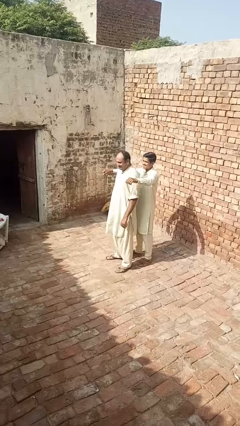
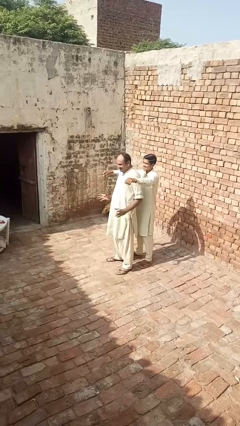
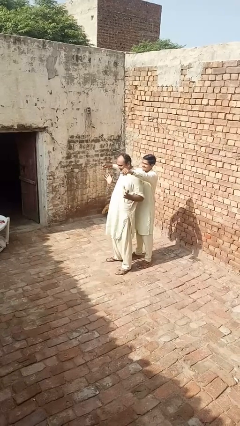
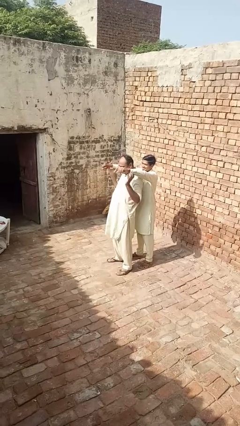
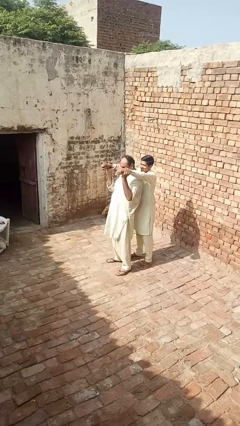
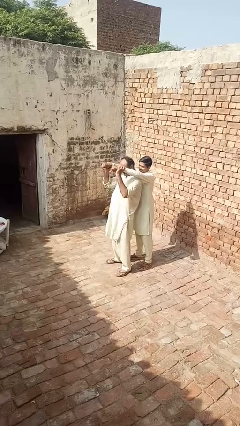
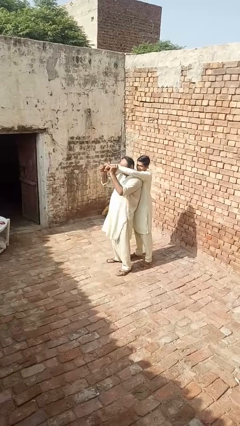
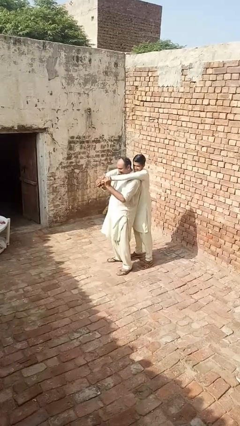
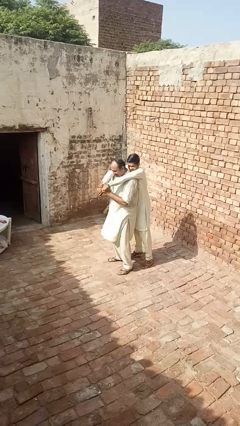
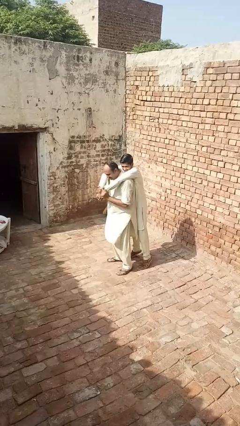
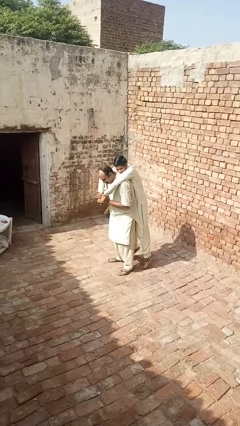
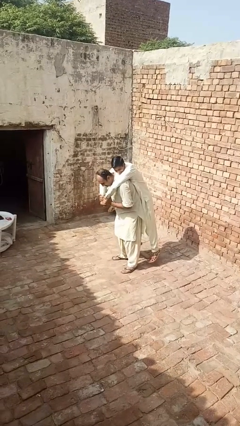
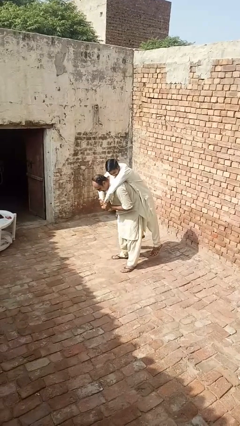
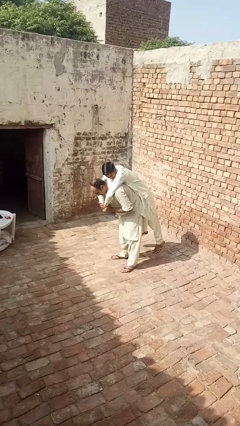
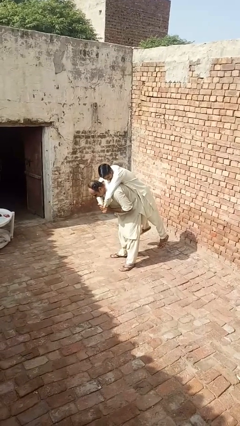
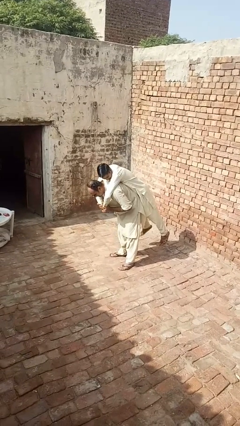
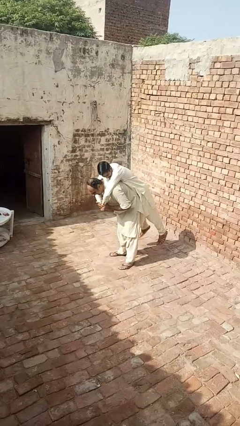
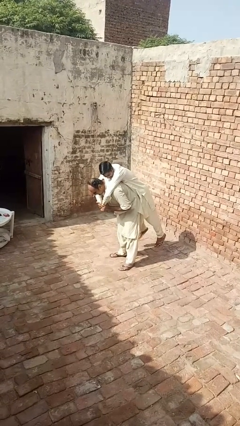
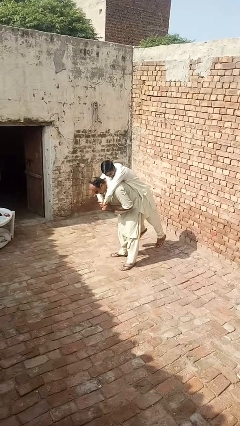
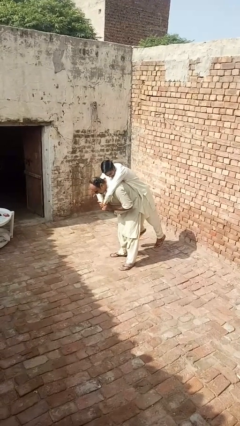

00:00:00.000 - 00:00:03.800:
person carries person over shoulder

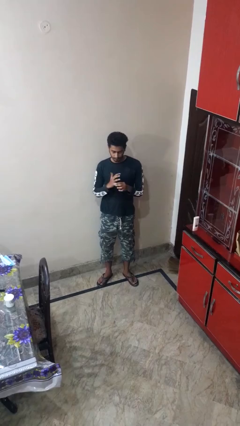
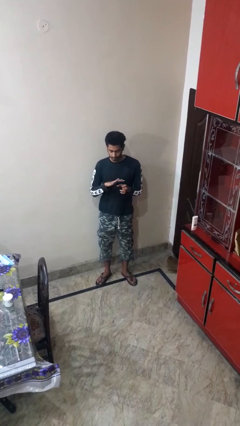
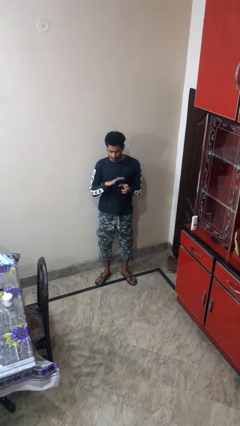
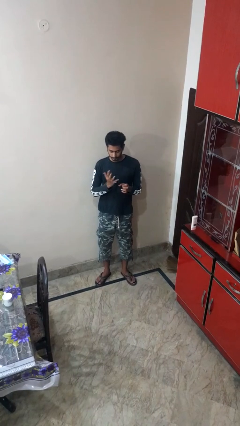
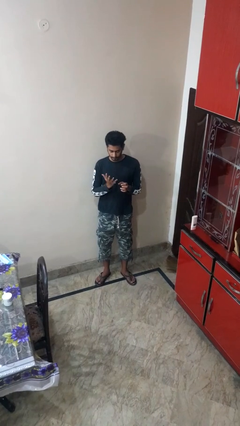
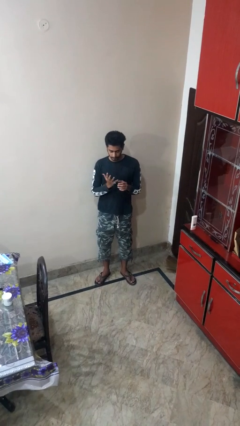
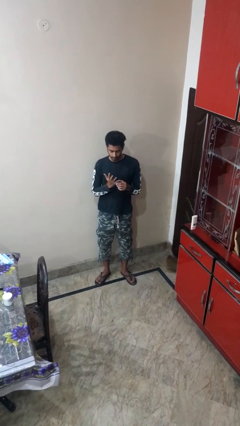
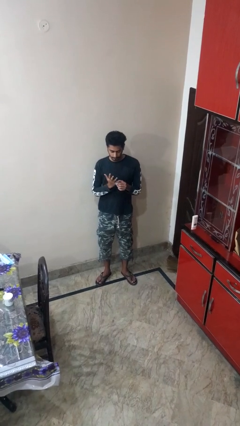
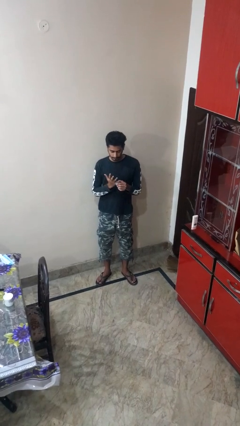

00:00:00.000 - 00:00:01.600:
person puts on ring

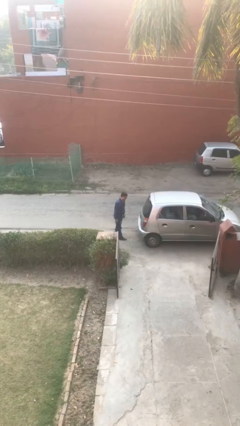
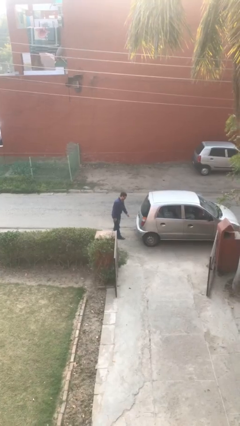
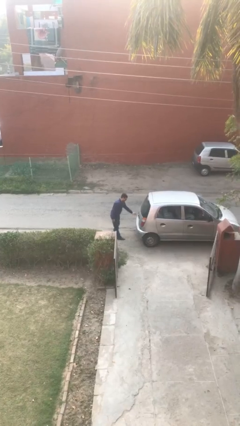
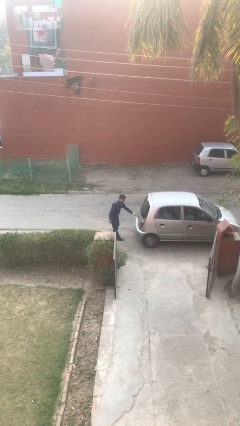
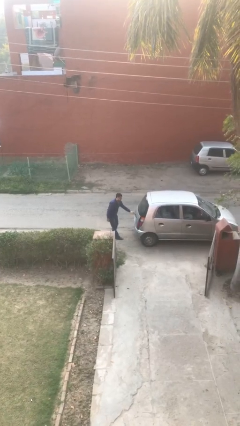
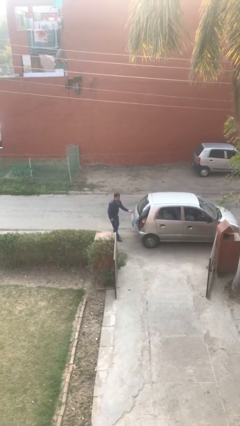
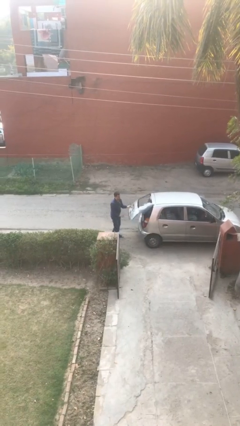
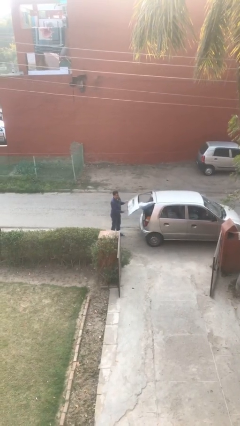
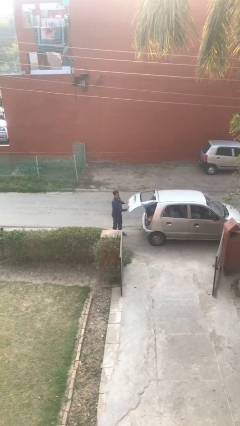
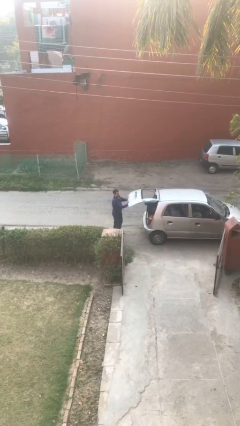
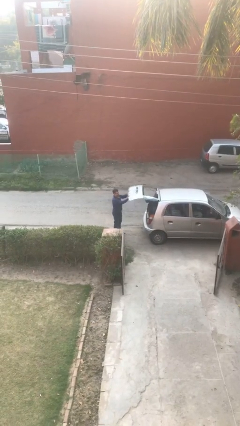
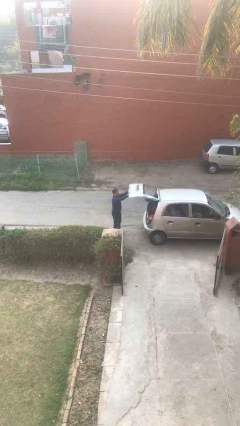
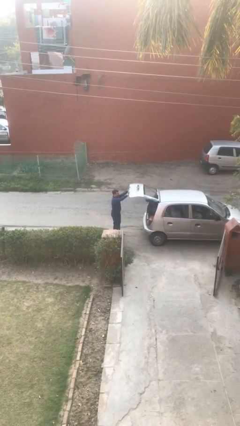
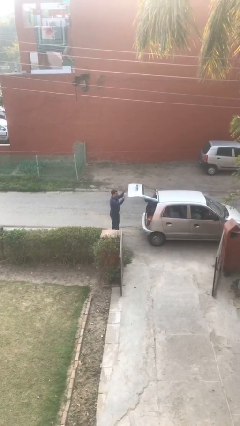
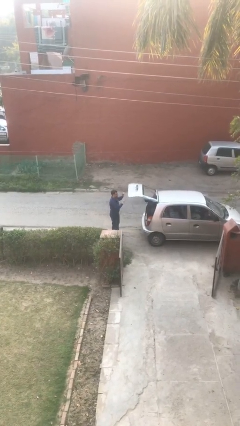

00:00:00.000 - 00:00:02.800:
person opens car trunk

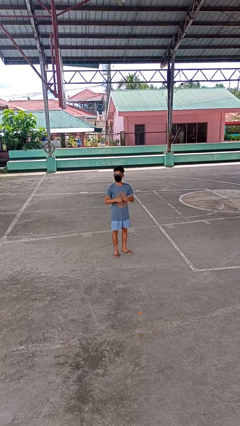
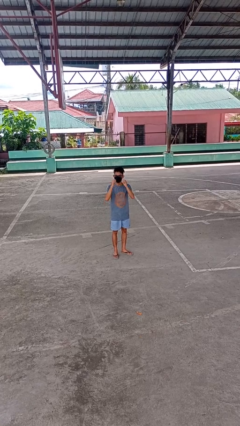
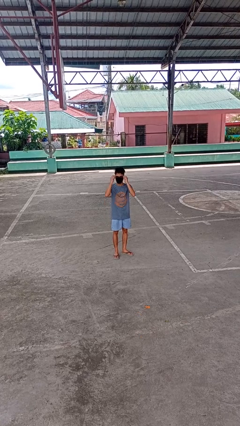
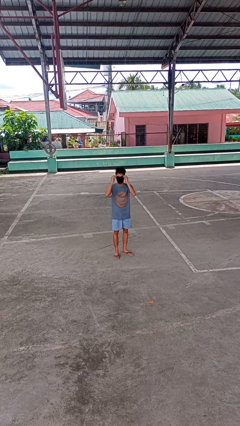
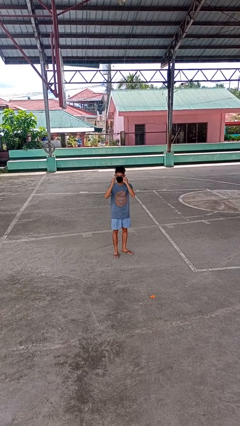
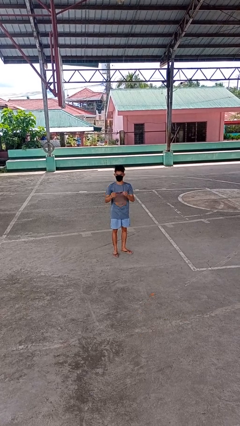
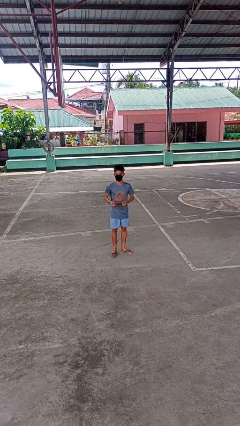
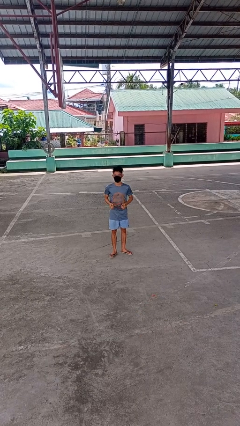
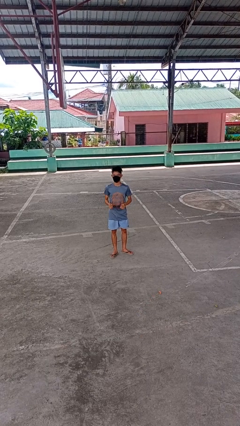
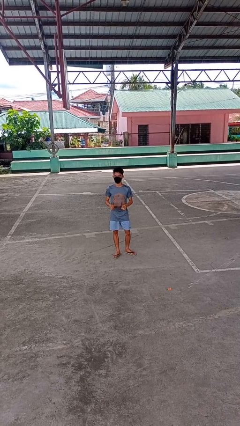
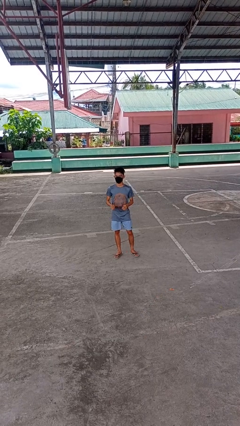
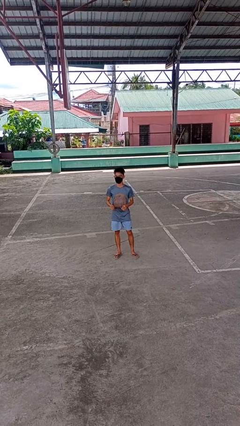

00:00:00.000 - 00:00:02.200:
person takes off glasses

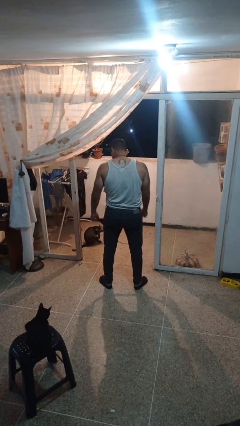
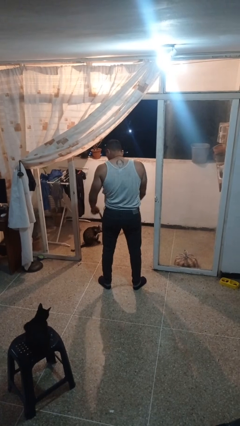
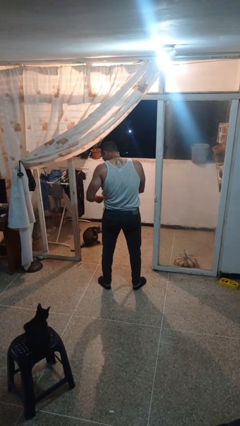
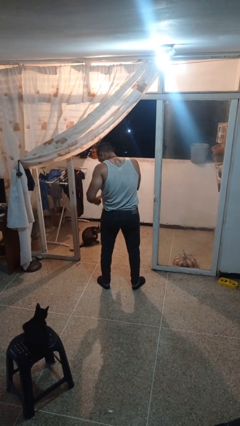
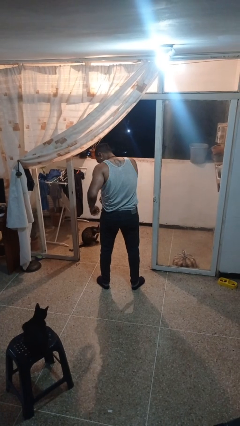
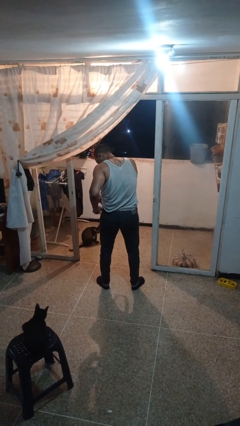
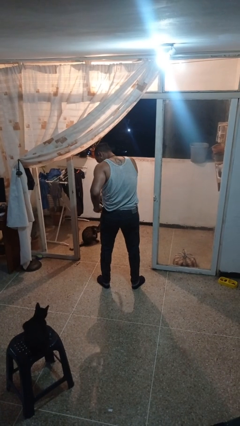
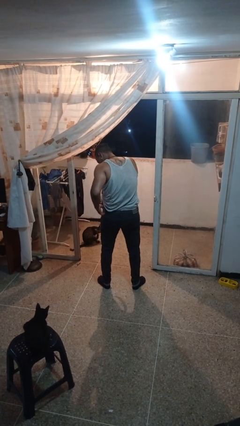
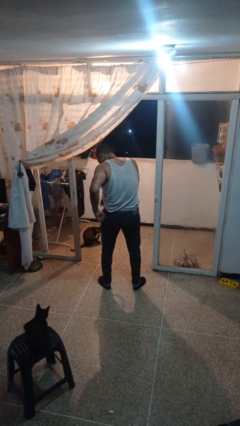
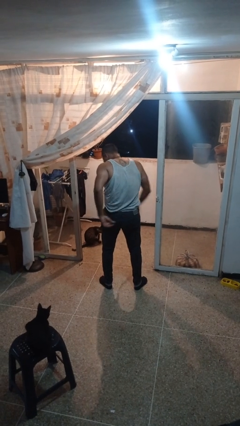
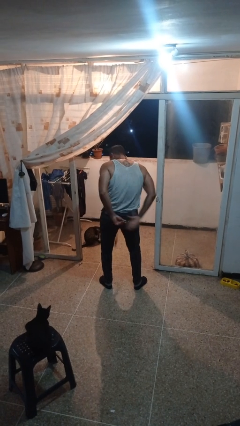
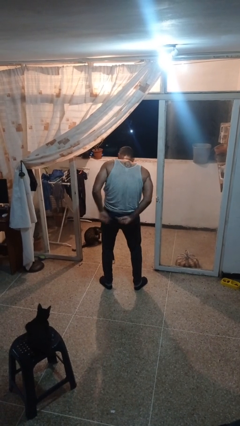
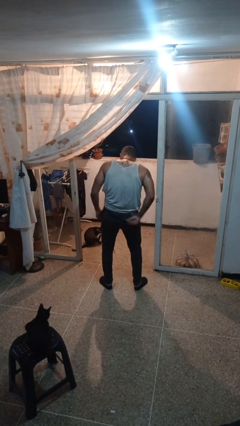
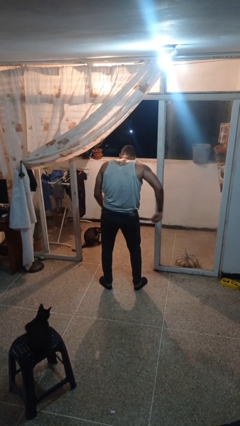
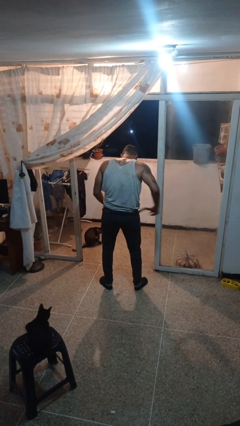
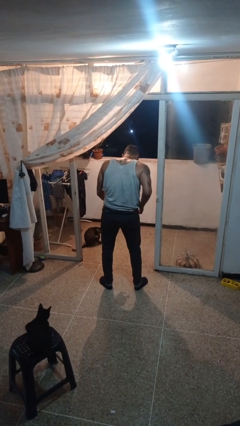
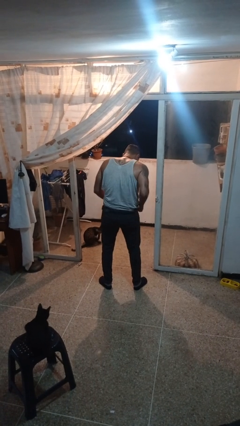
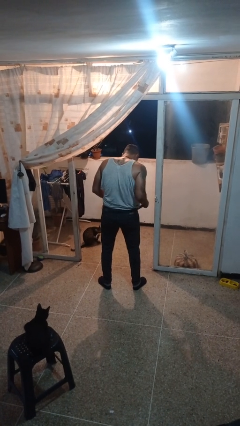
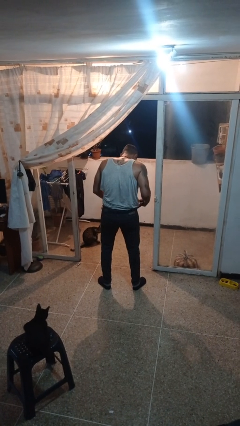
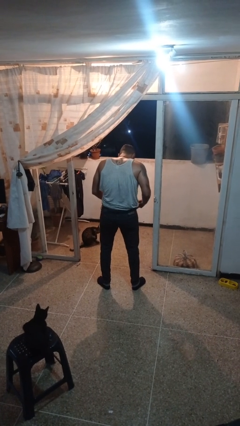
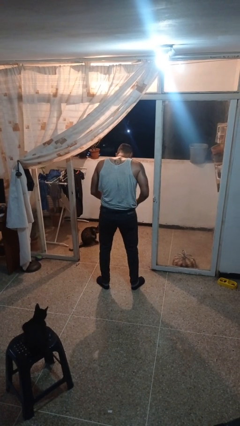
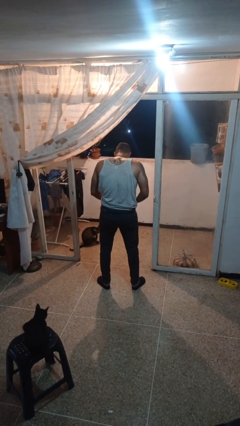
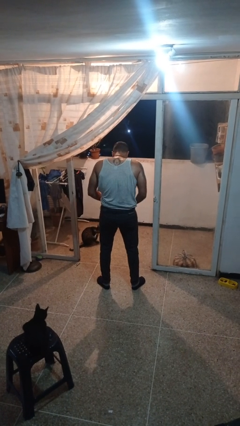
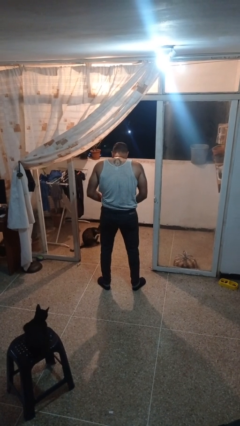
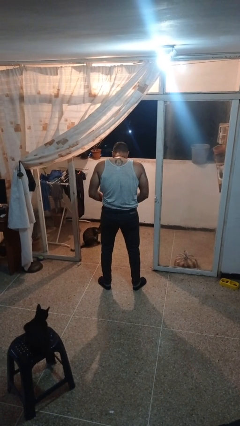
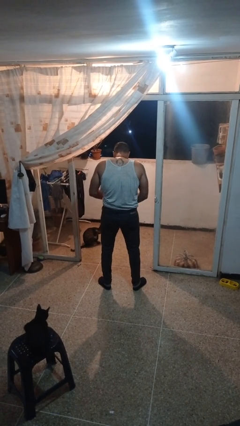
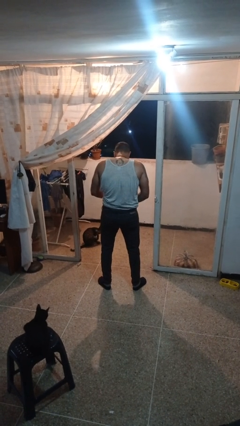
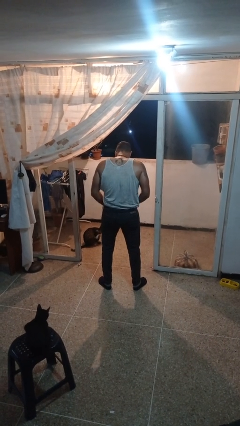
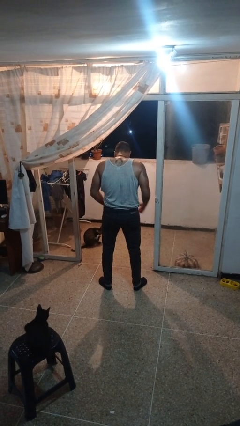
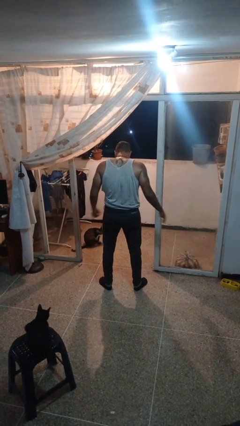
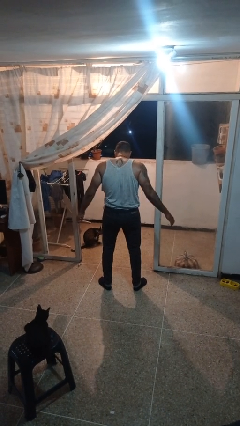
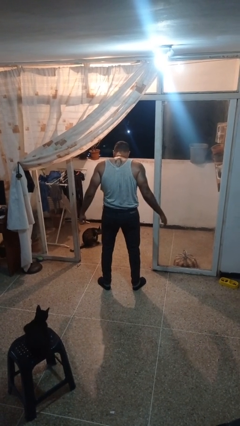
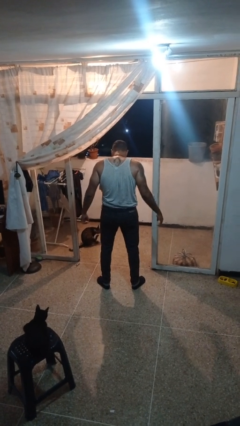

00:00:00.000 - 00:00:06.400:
person puts on belt

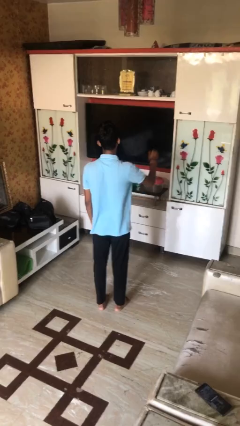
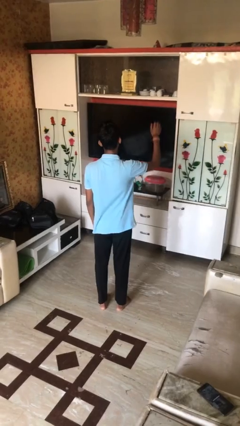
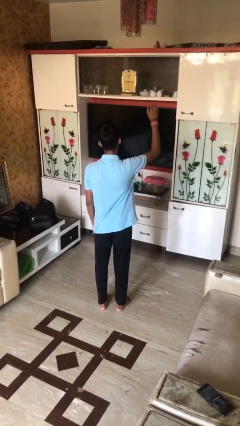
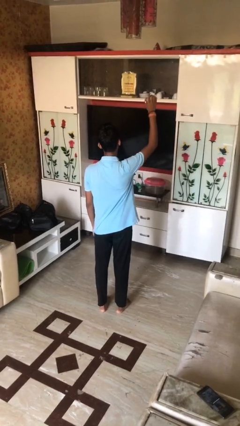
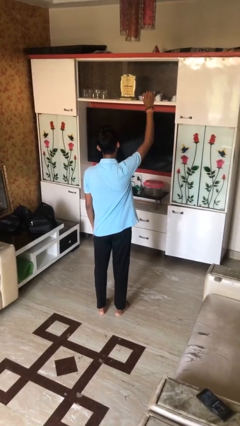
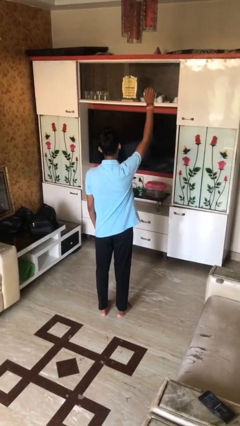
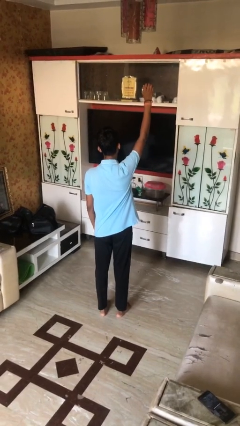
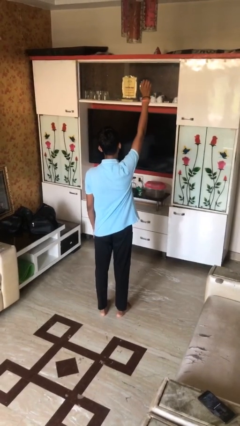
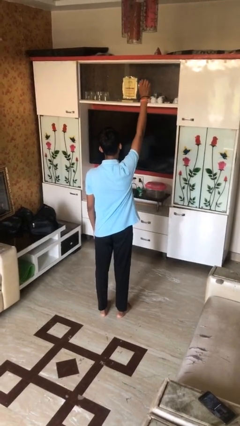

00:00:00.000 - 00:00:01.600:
person gestures raise hand
